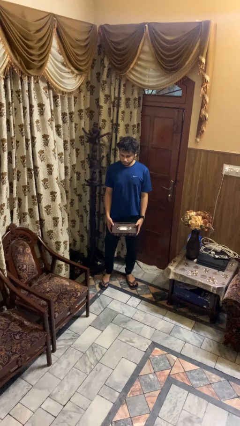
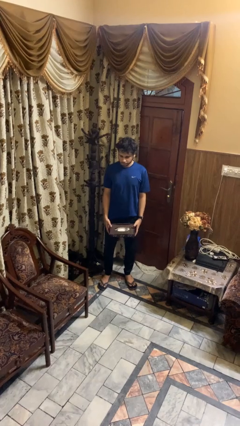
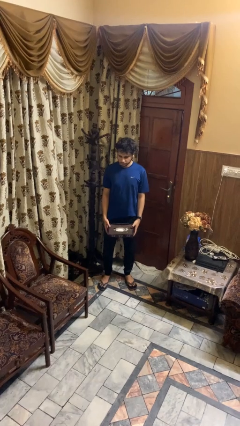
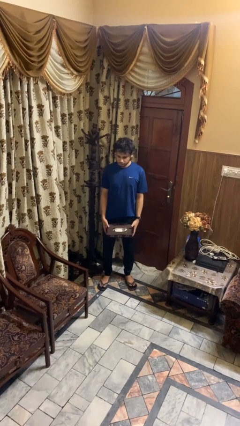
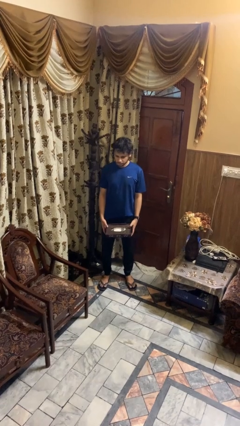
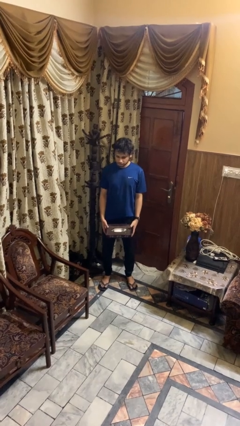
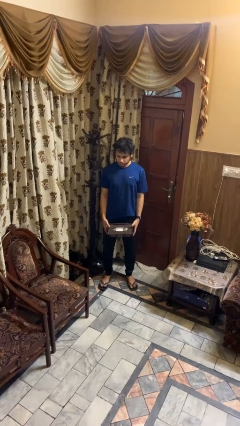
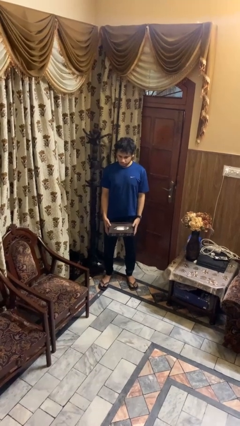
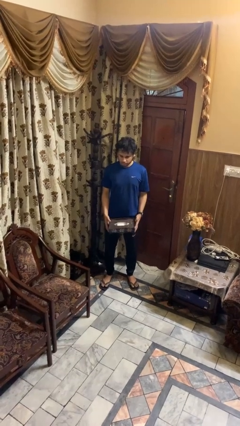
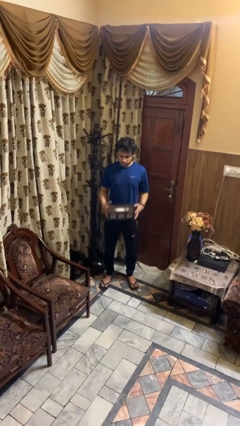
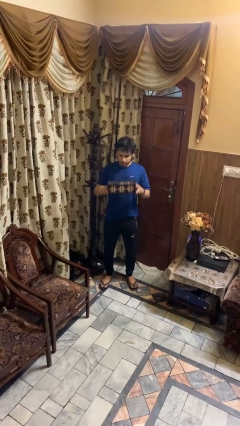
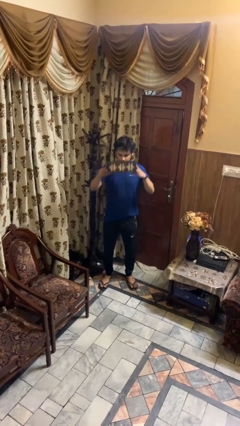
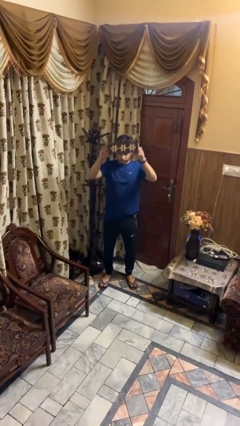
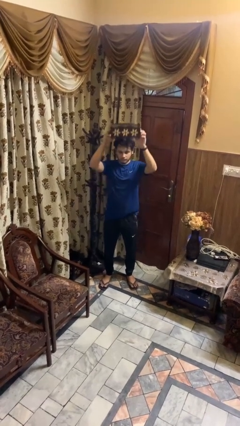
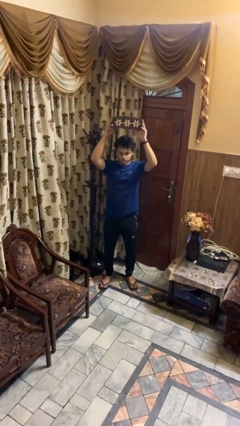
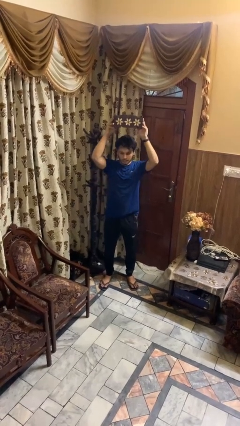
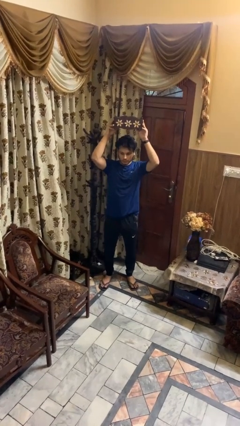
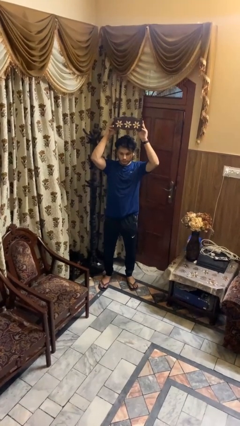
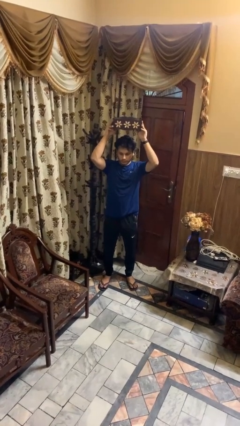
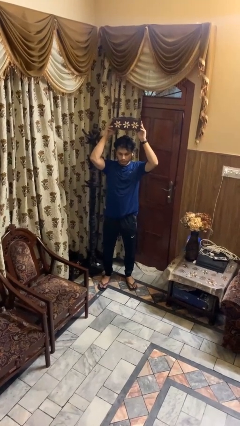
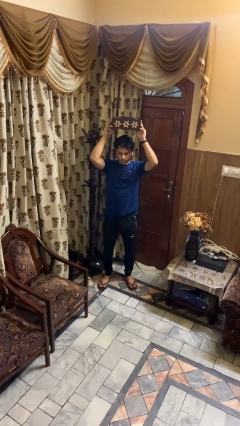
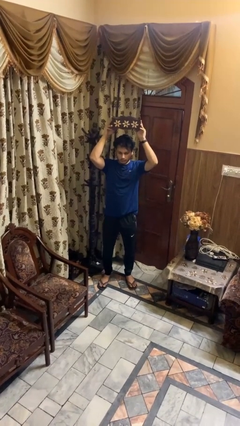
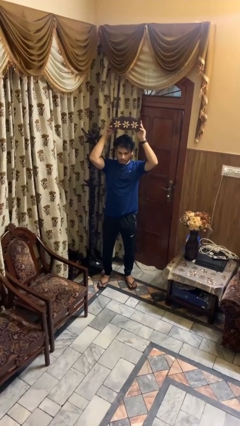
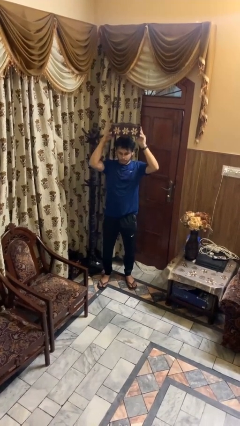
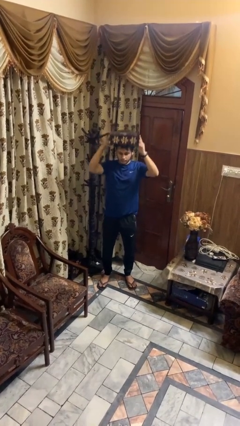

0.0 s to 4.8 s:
person holds object above head

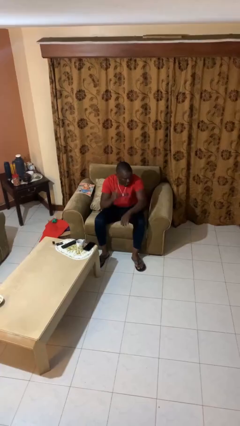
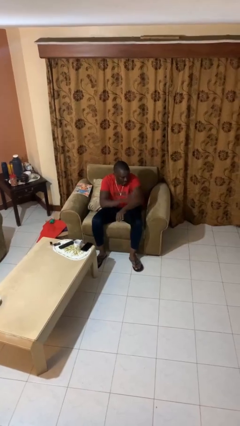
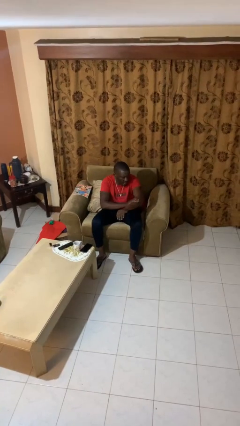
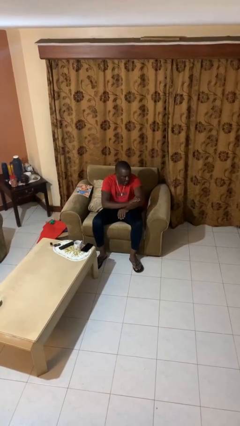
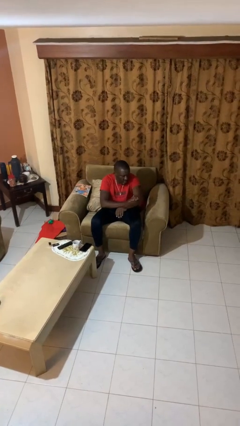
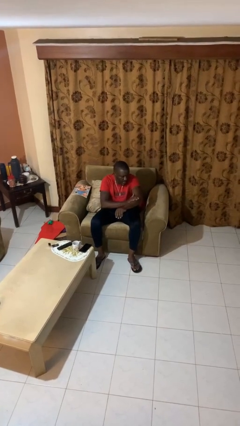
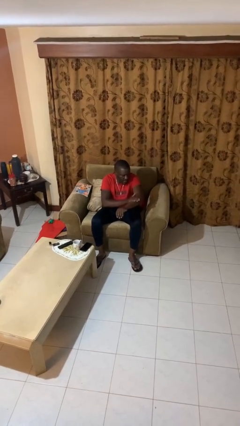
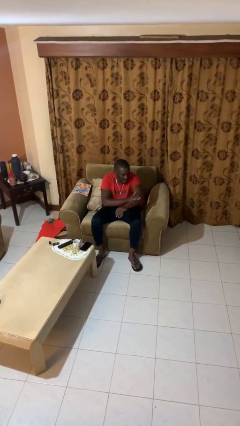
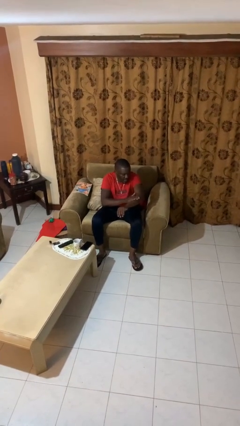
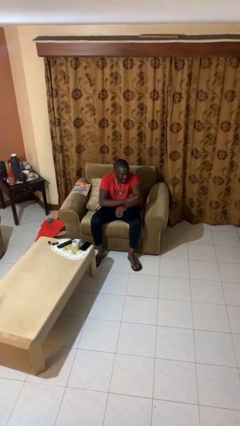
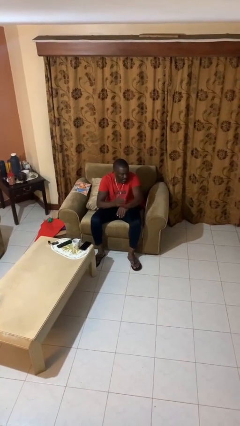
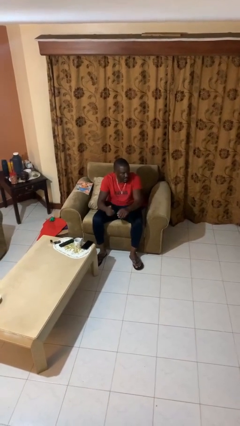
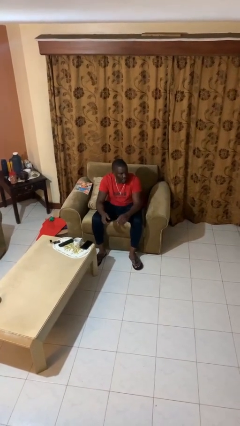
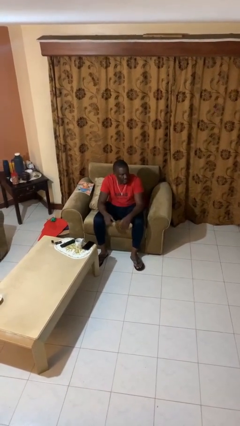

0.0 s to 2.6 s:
person swats bug

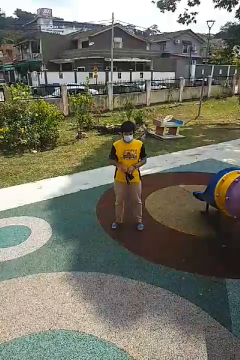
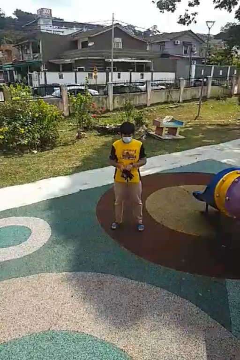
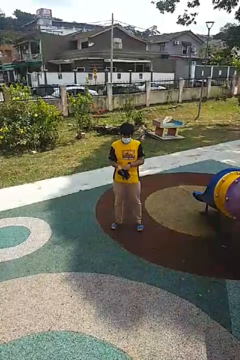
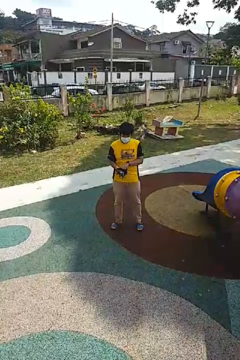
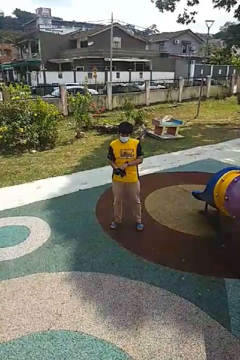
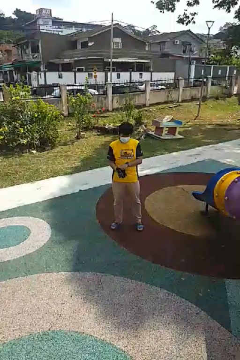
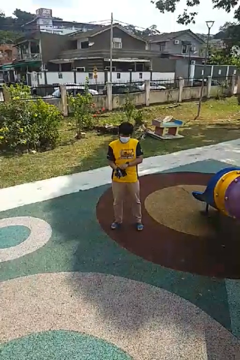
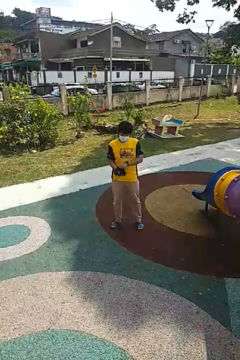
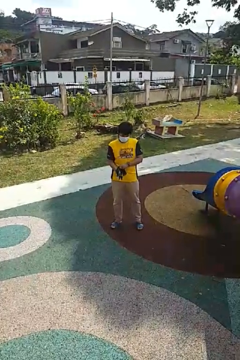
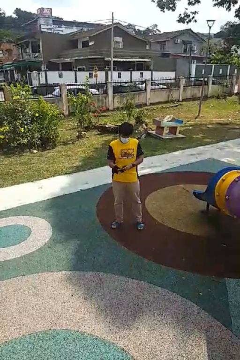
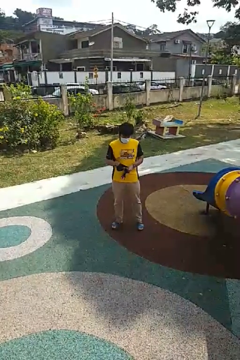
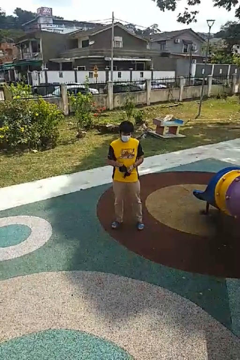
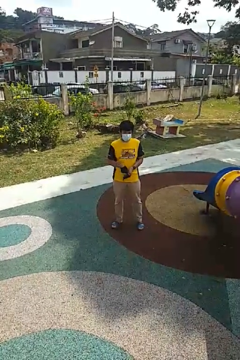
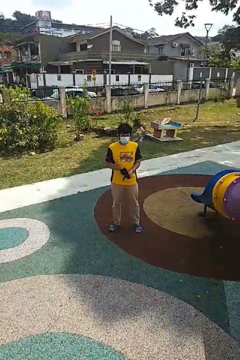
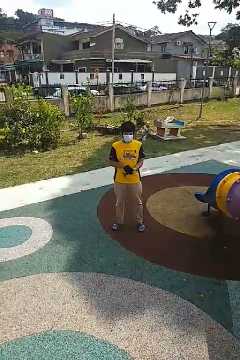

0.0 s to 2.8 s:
person puts on gloves

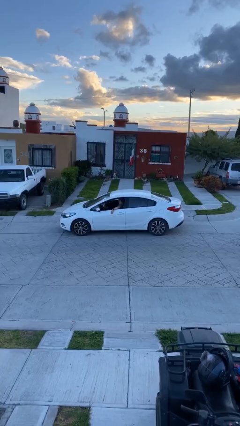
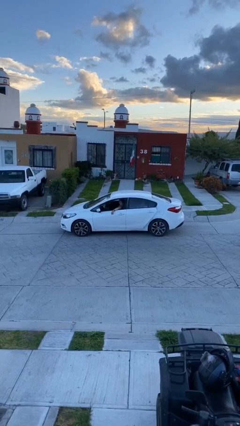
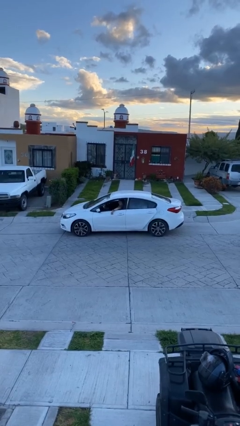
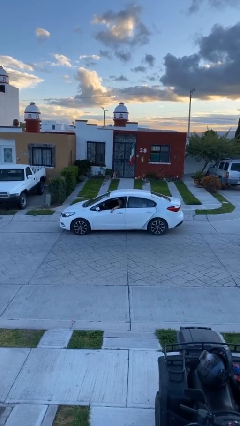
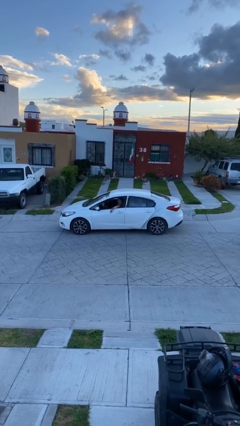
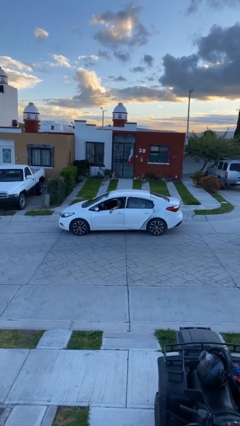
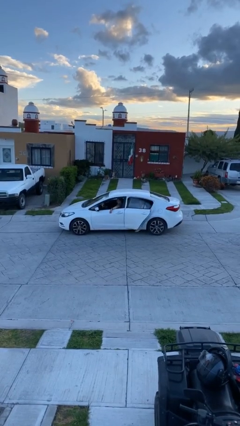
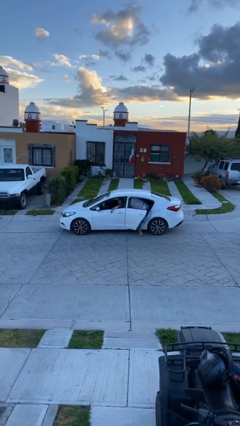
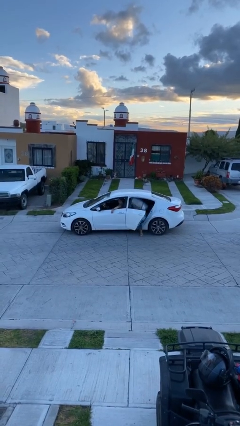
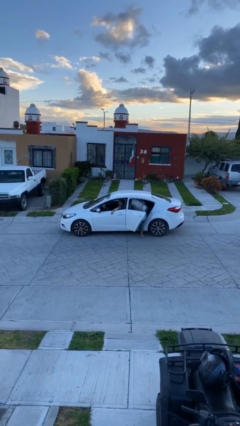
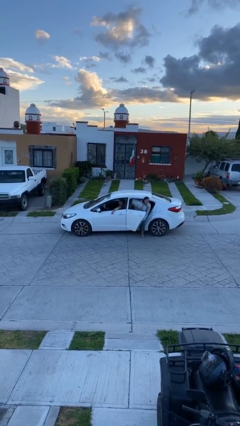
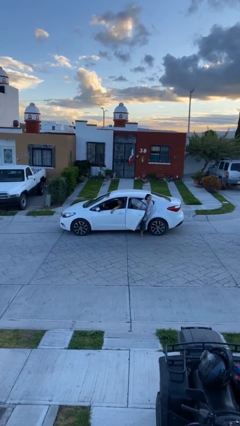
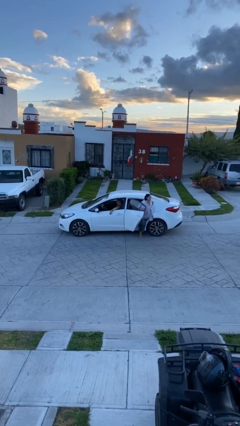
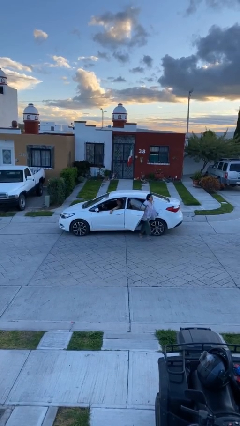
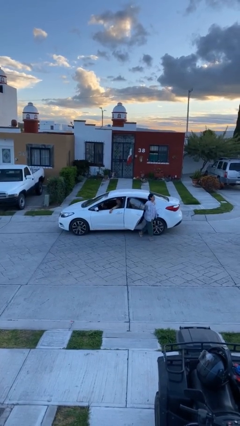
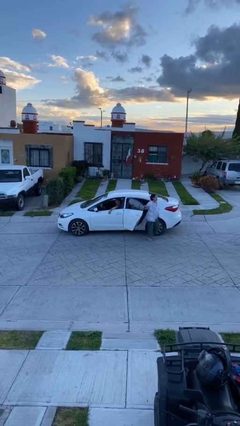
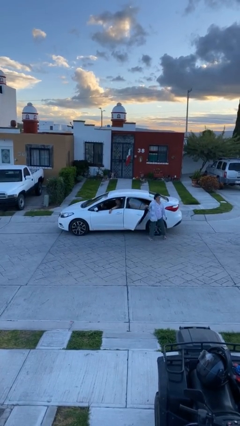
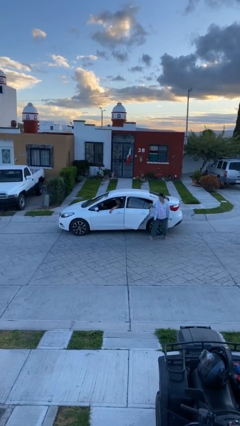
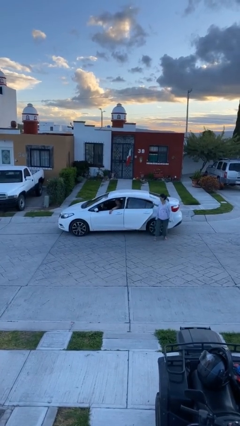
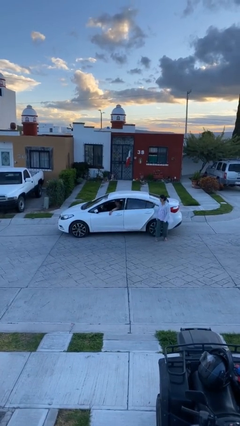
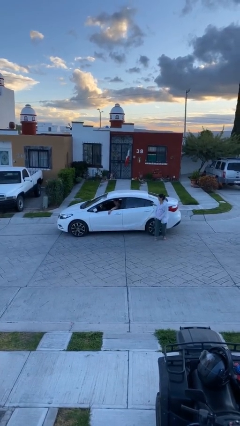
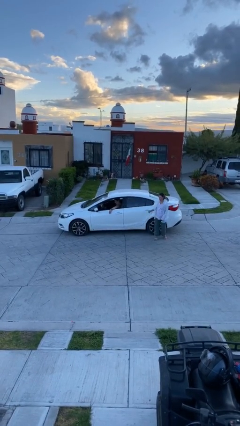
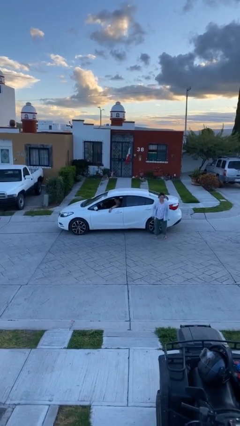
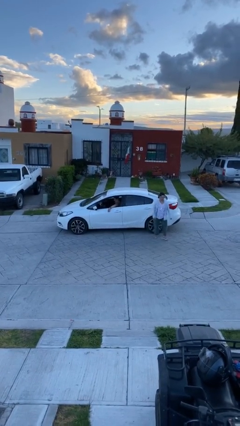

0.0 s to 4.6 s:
car drops off person

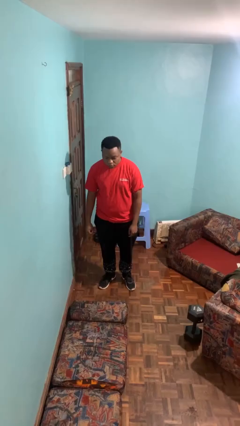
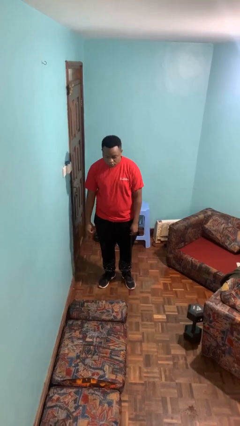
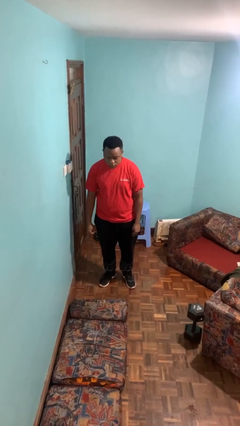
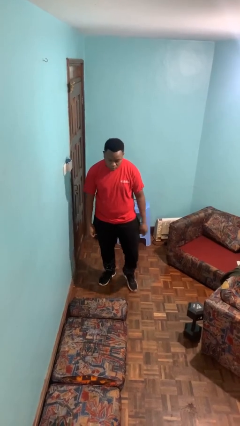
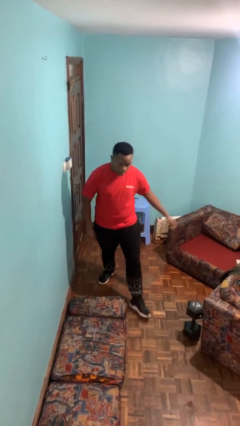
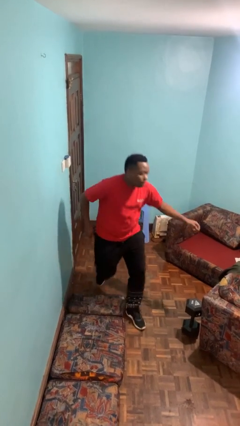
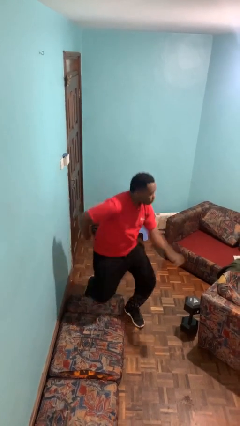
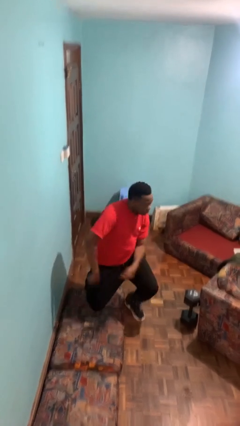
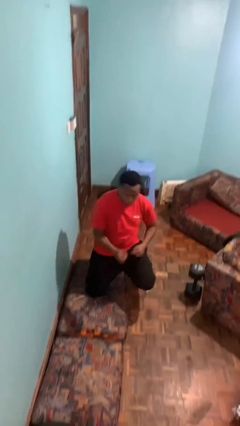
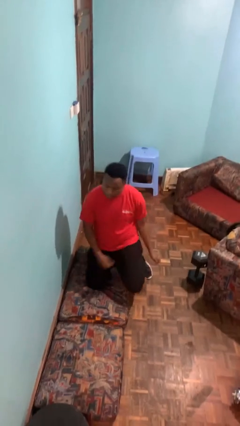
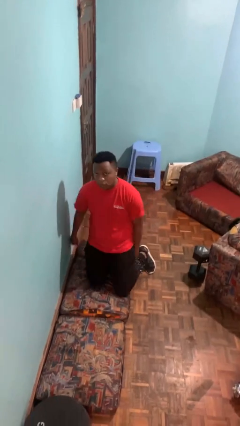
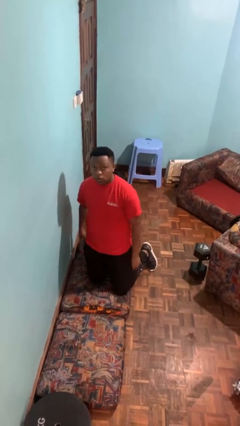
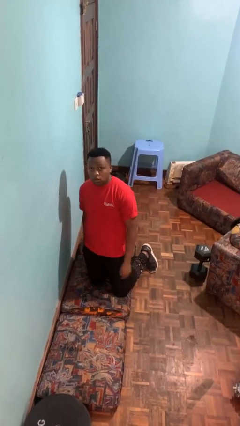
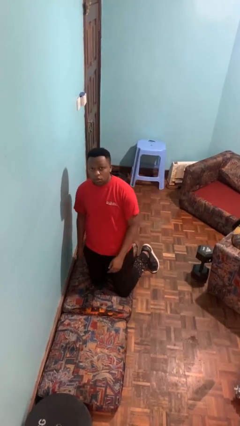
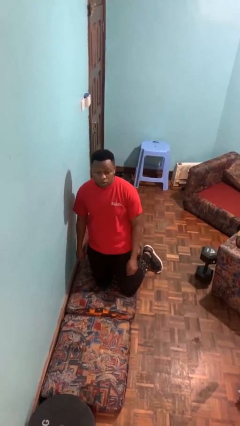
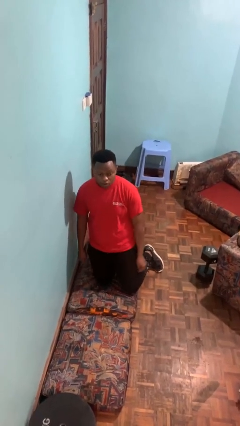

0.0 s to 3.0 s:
person trips on object on floor
